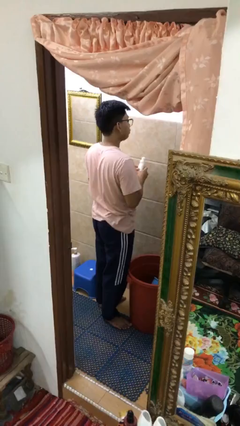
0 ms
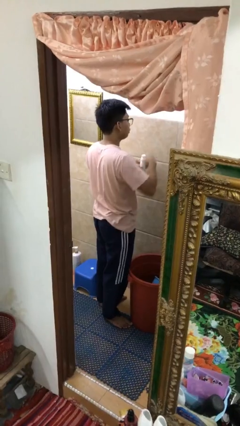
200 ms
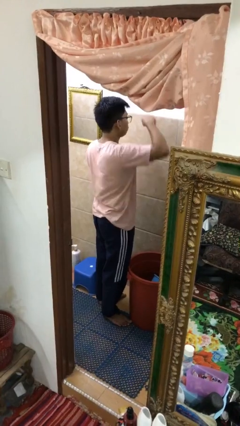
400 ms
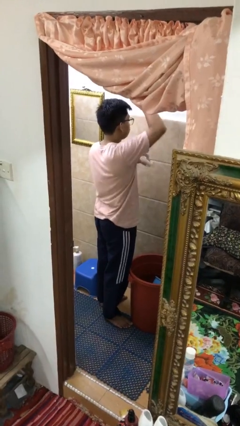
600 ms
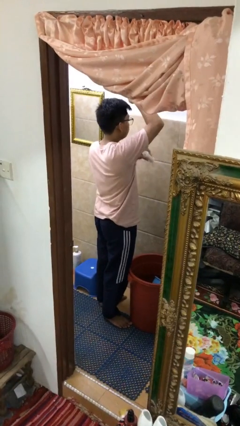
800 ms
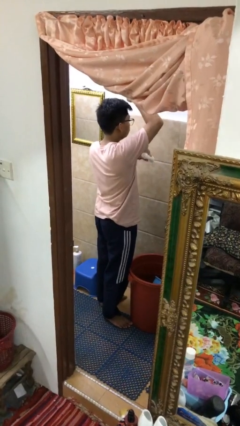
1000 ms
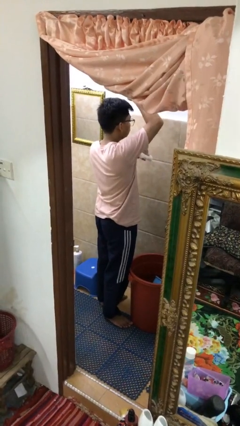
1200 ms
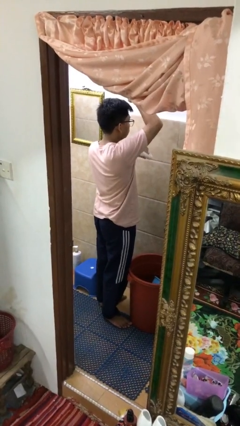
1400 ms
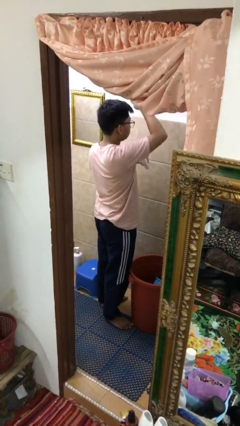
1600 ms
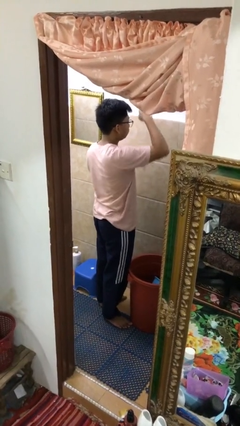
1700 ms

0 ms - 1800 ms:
person applies deodorant

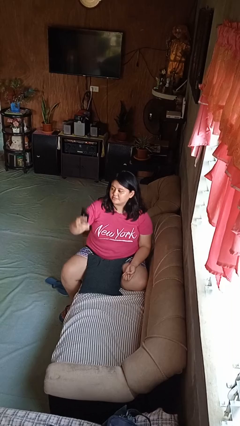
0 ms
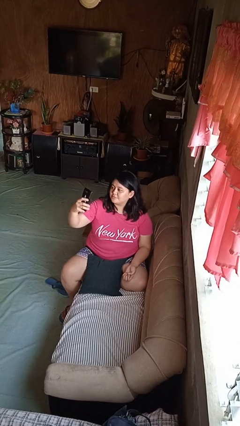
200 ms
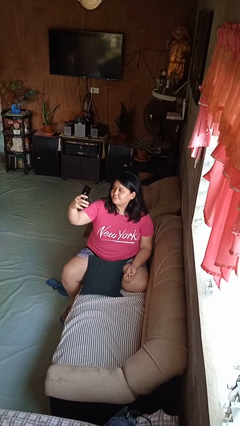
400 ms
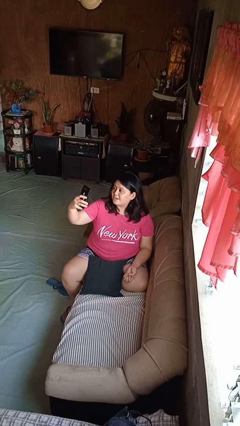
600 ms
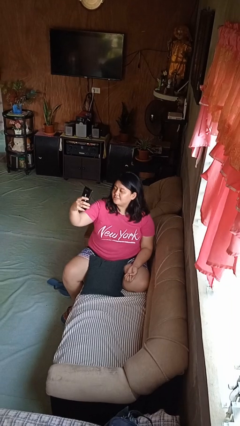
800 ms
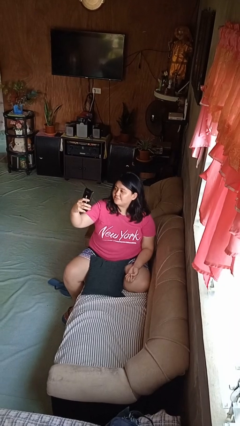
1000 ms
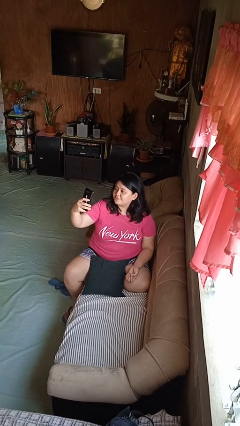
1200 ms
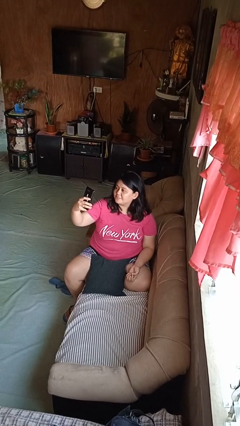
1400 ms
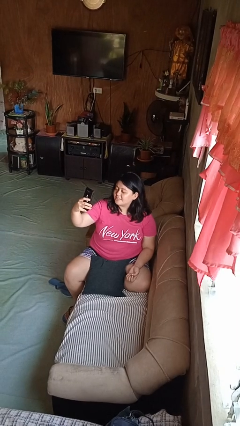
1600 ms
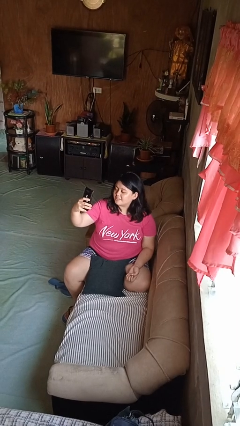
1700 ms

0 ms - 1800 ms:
person takes selfie

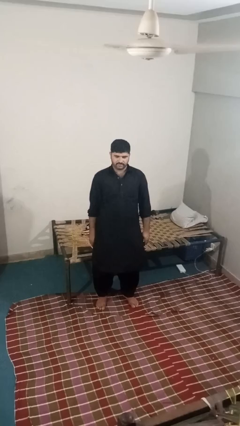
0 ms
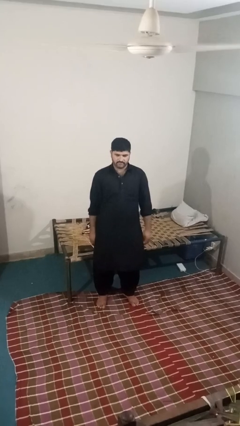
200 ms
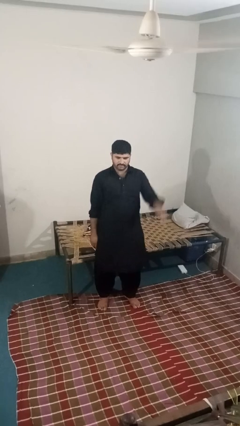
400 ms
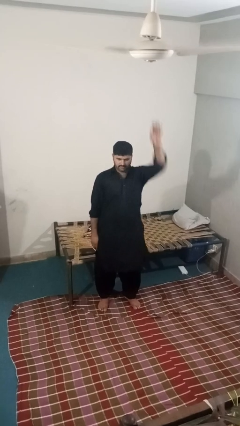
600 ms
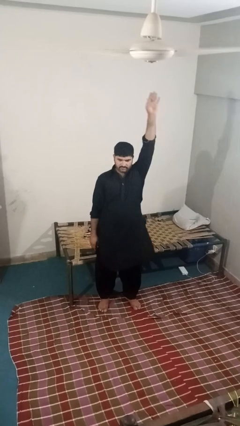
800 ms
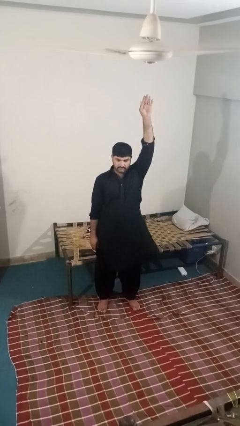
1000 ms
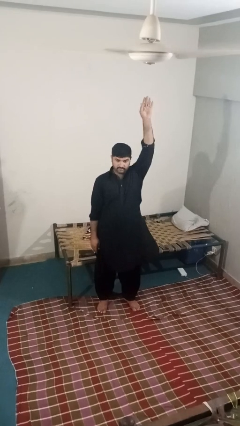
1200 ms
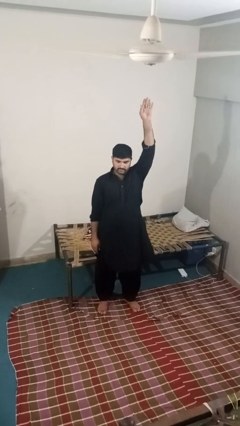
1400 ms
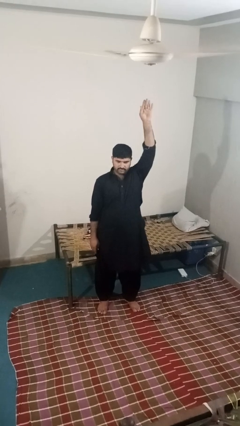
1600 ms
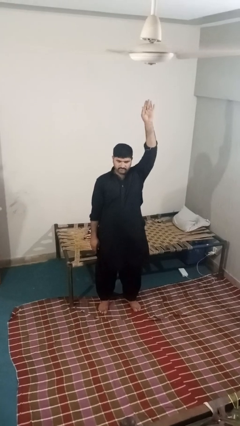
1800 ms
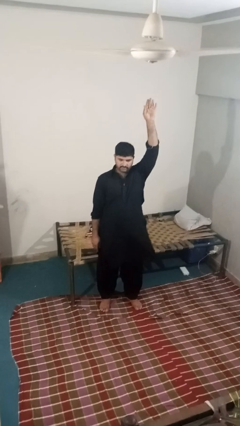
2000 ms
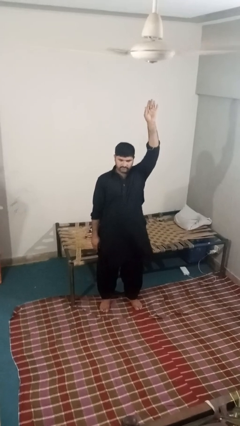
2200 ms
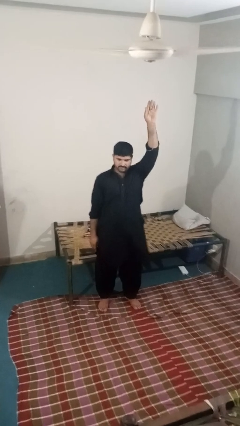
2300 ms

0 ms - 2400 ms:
person gestures raise hand

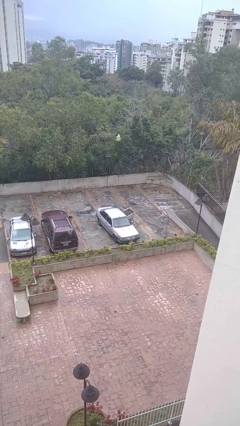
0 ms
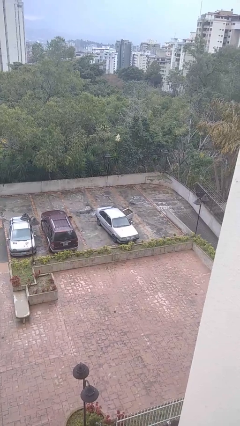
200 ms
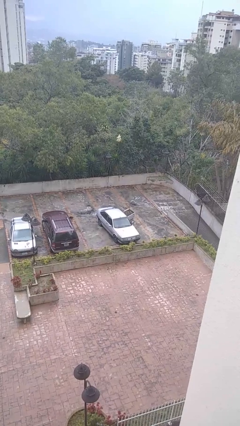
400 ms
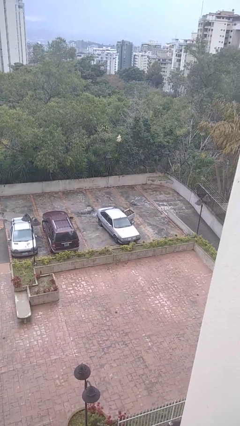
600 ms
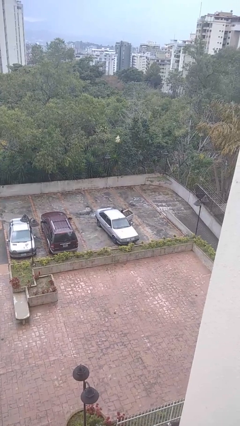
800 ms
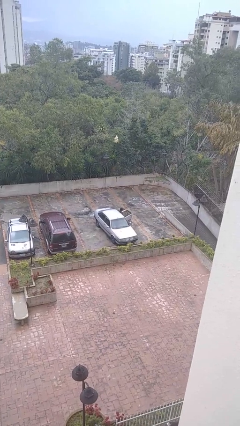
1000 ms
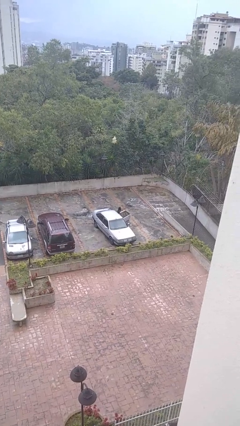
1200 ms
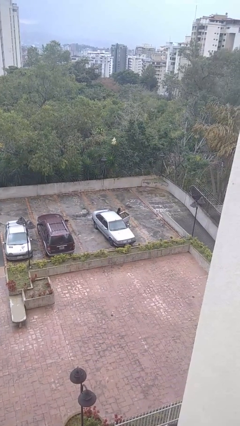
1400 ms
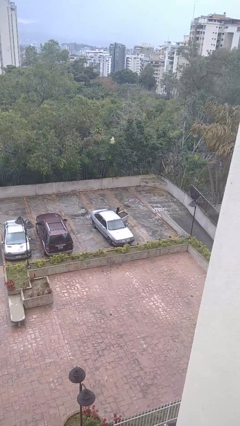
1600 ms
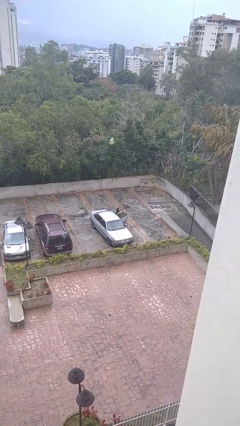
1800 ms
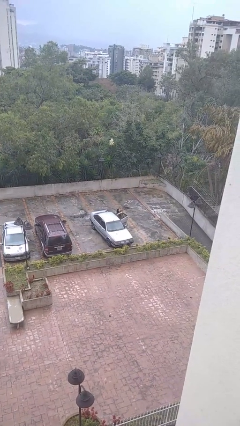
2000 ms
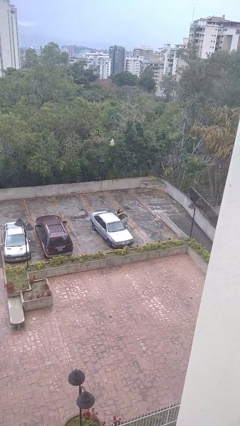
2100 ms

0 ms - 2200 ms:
person exits car

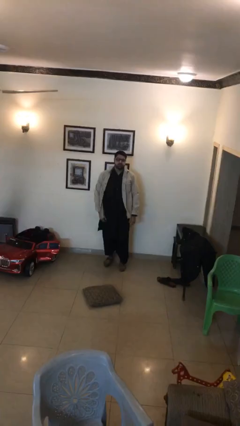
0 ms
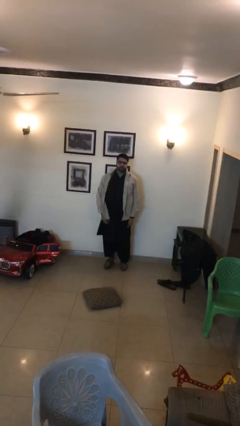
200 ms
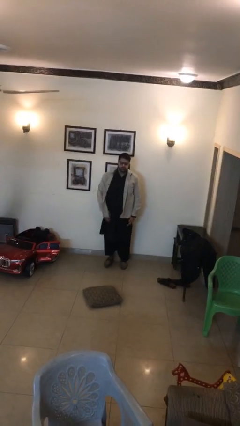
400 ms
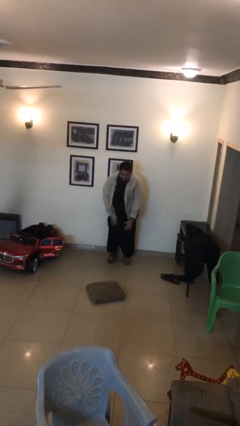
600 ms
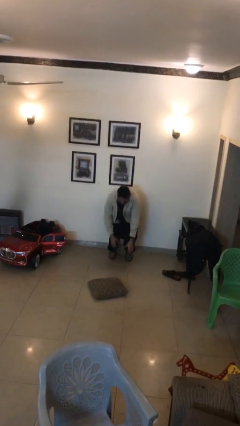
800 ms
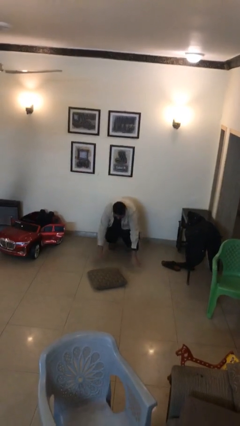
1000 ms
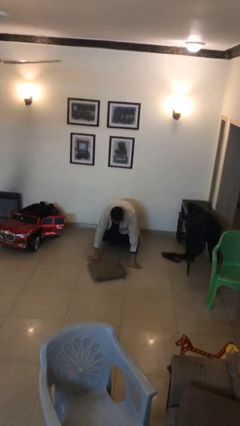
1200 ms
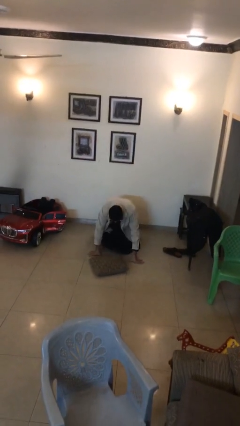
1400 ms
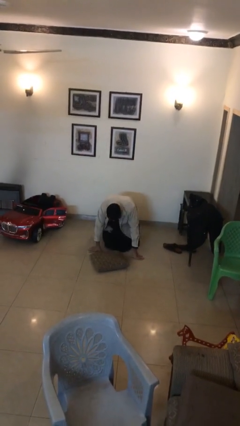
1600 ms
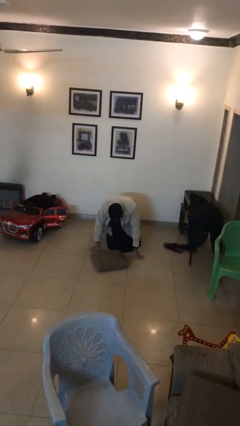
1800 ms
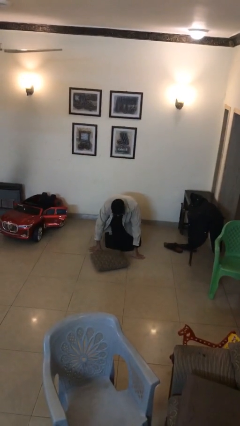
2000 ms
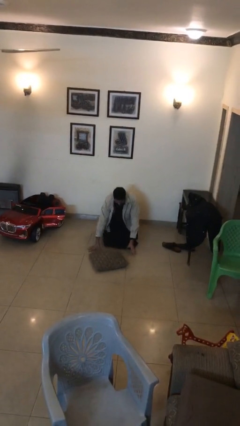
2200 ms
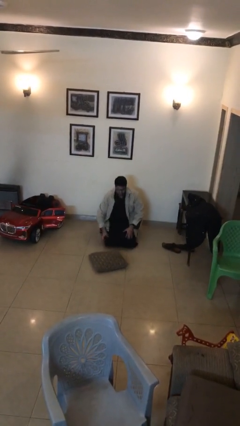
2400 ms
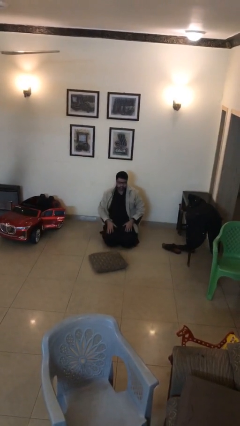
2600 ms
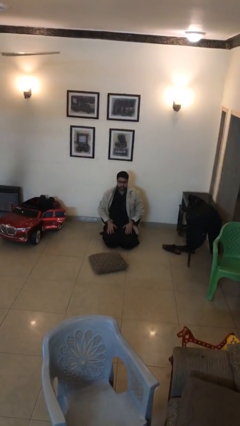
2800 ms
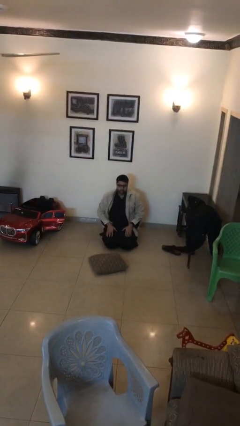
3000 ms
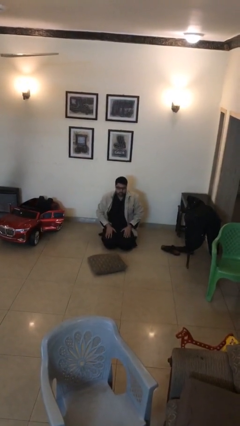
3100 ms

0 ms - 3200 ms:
person sits down

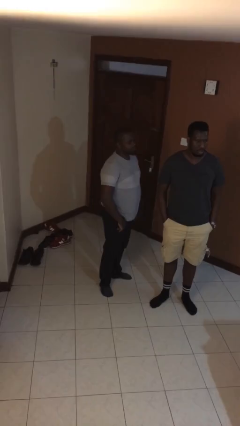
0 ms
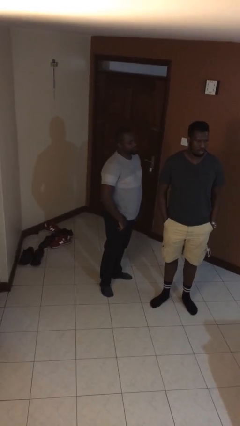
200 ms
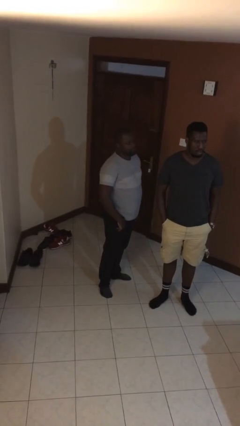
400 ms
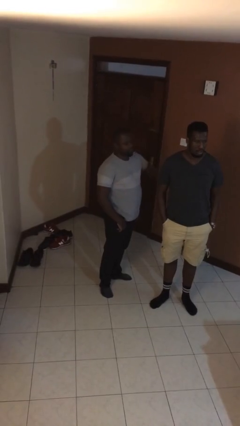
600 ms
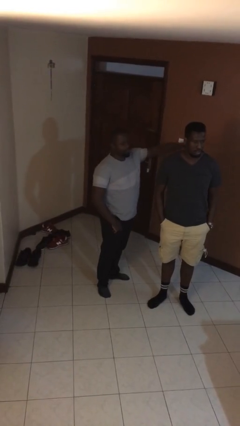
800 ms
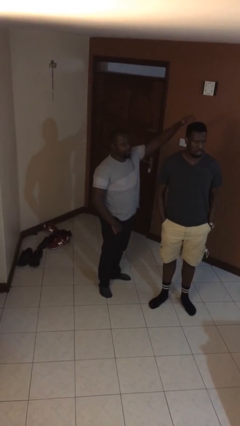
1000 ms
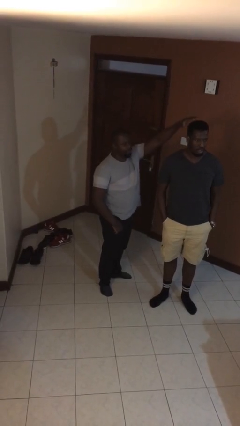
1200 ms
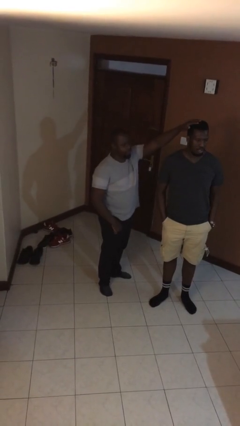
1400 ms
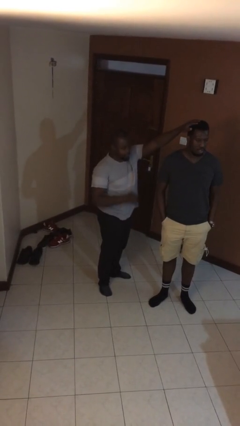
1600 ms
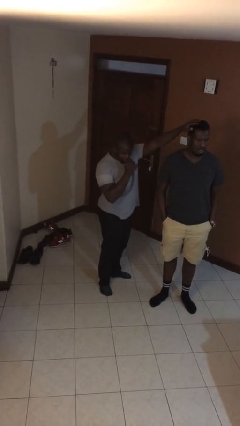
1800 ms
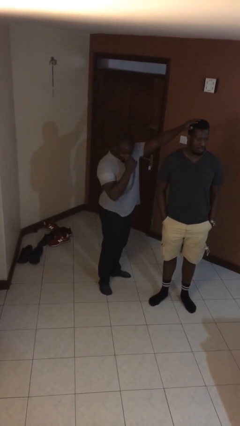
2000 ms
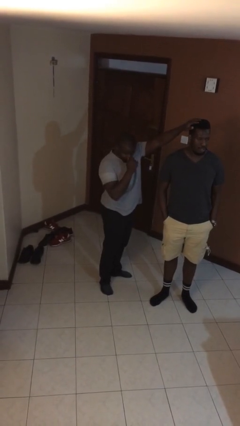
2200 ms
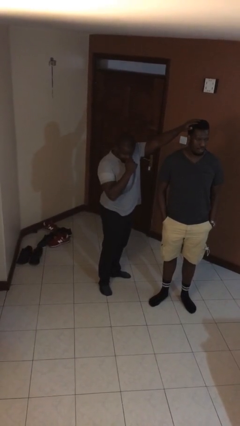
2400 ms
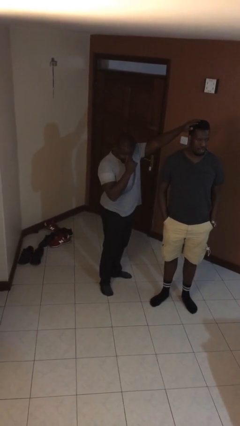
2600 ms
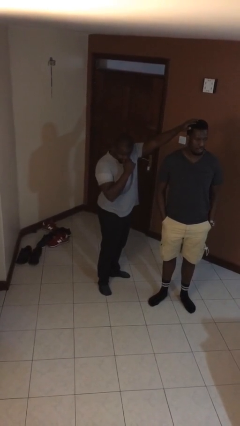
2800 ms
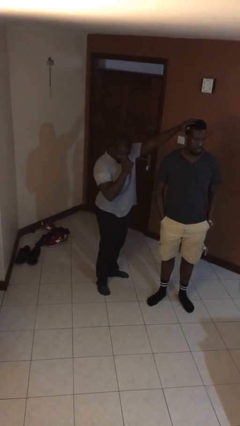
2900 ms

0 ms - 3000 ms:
person grabs person by hair

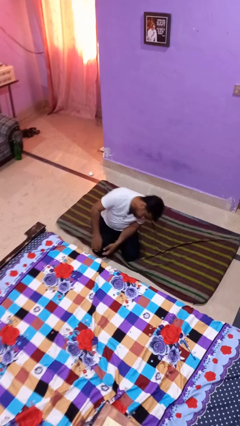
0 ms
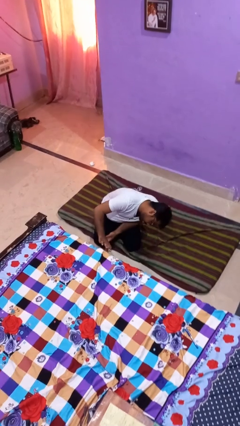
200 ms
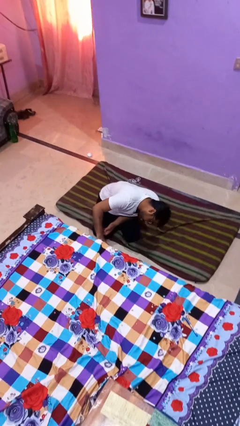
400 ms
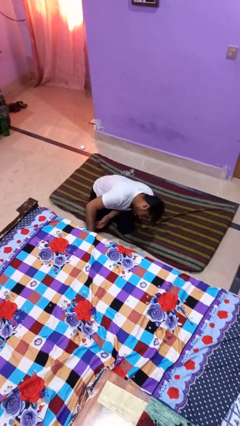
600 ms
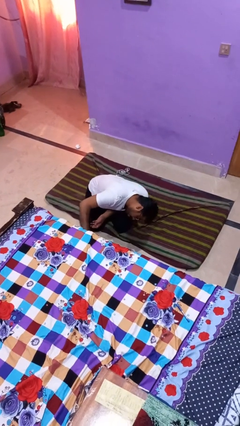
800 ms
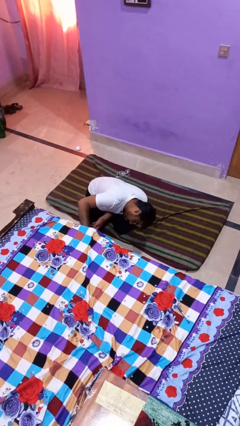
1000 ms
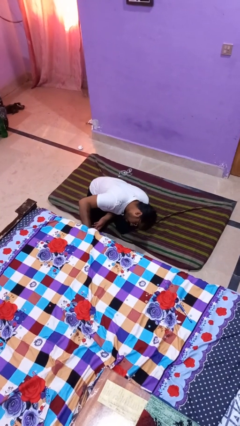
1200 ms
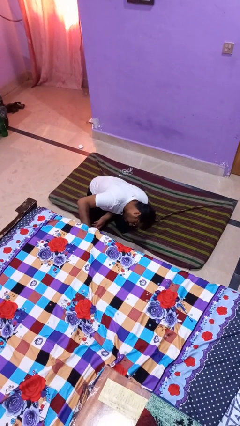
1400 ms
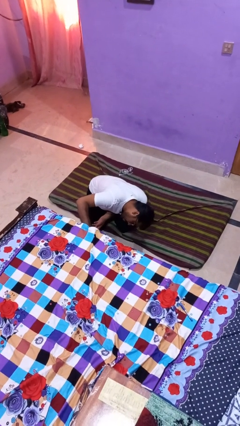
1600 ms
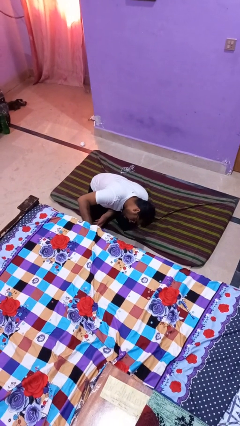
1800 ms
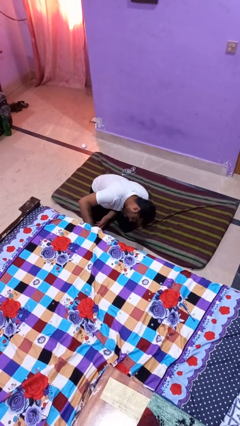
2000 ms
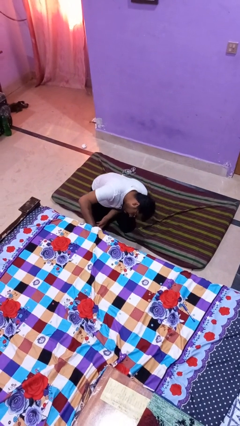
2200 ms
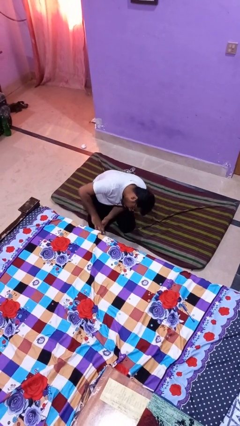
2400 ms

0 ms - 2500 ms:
person searches under bed

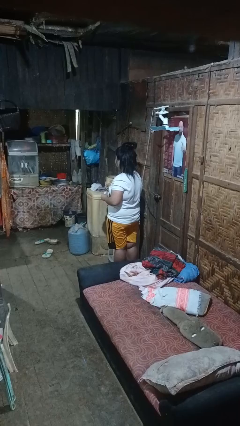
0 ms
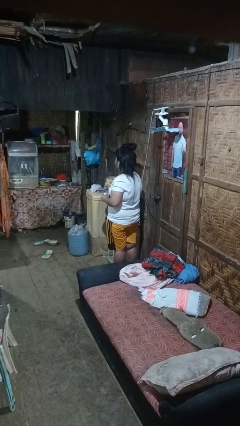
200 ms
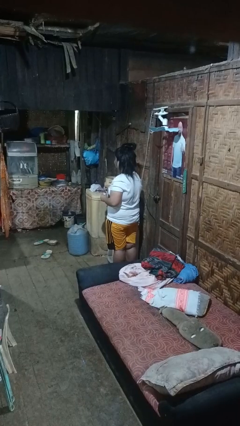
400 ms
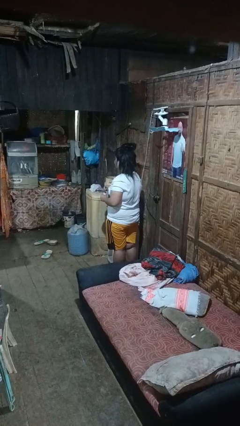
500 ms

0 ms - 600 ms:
person stirs mug
